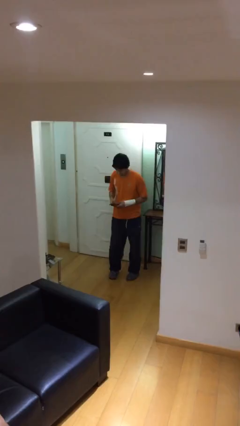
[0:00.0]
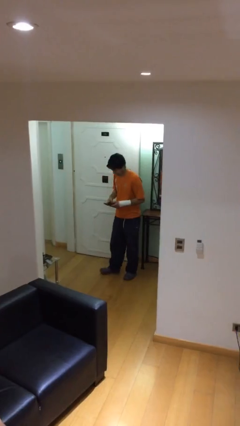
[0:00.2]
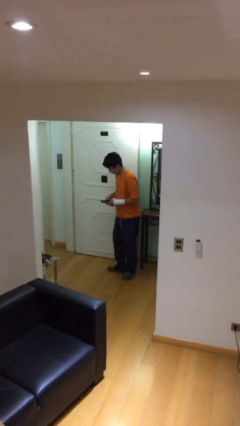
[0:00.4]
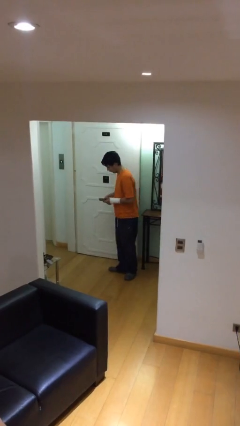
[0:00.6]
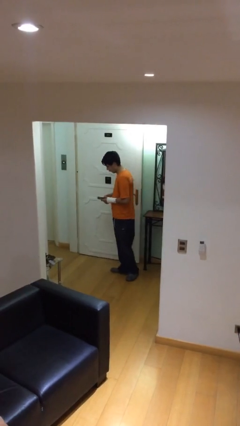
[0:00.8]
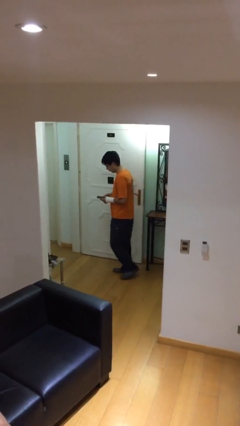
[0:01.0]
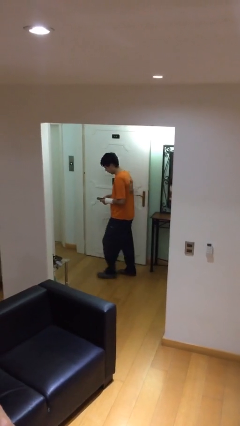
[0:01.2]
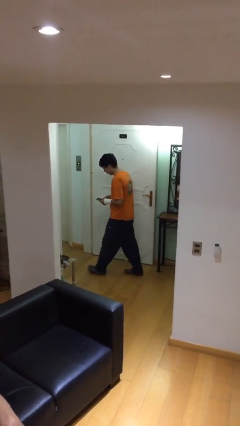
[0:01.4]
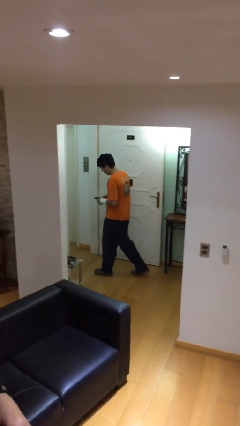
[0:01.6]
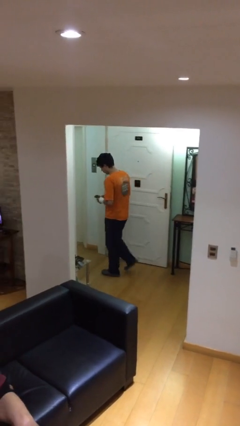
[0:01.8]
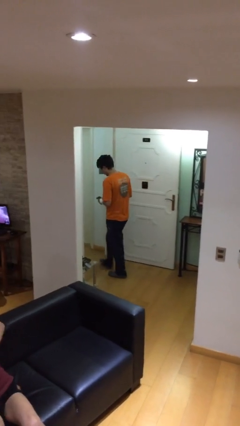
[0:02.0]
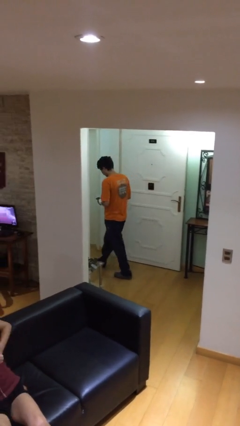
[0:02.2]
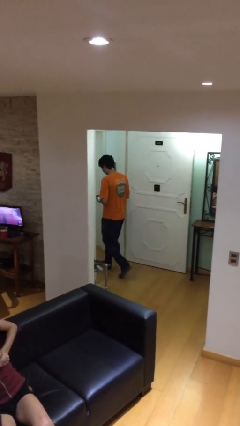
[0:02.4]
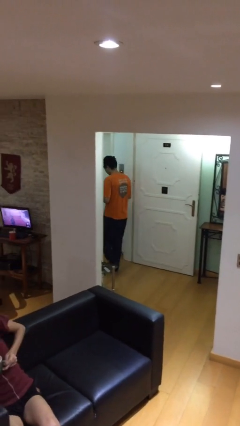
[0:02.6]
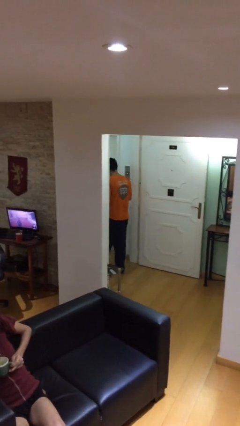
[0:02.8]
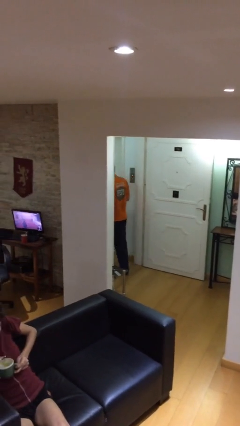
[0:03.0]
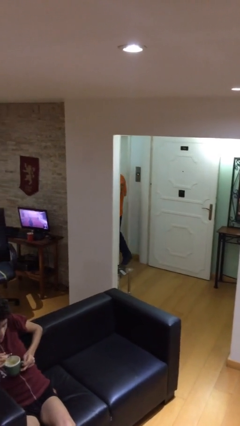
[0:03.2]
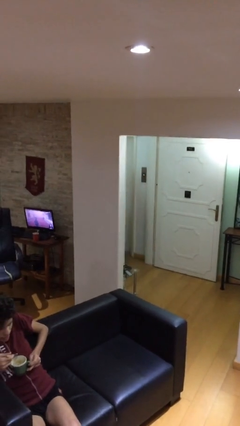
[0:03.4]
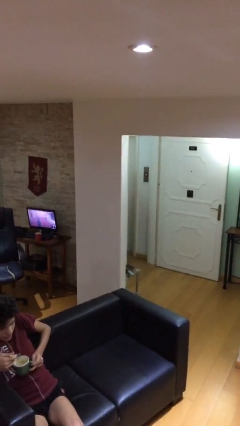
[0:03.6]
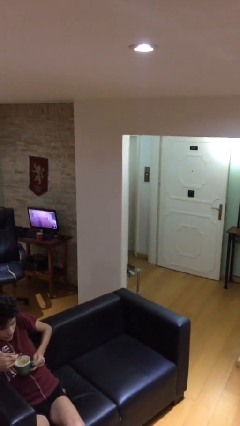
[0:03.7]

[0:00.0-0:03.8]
person exits scene through structure

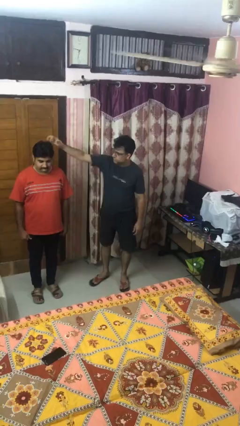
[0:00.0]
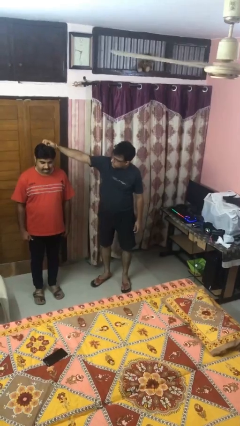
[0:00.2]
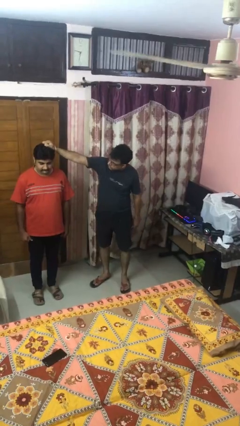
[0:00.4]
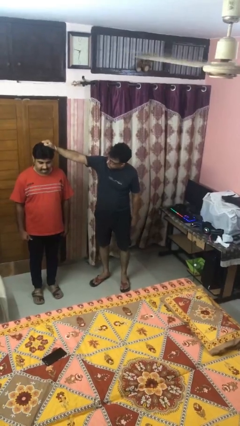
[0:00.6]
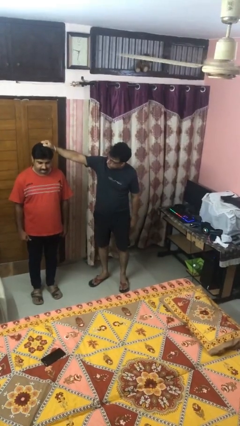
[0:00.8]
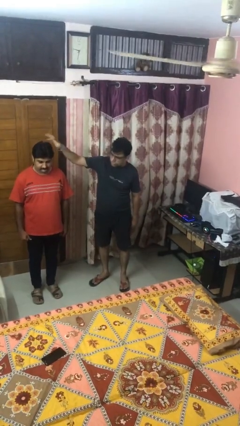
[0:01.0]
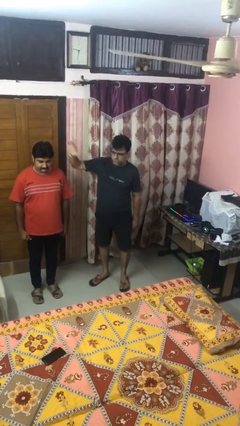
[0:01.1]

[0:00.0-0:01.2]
person grabs person by hair

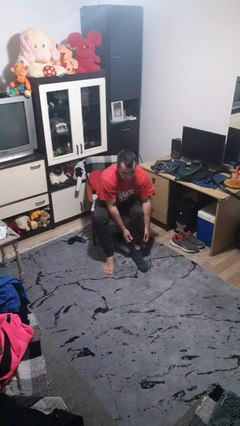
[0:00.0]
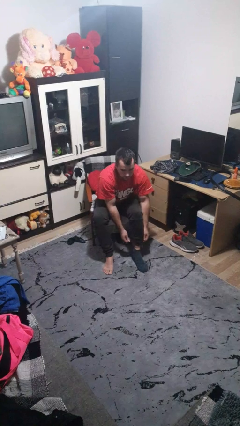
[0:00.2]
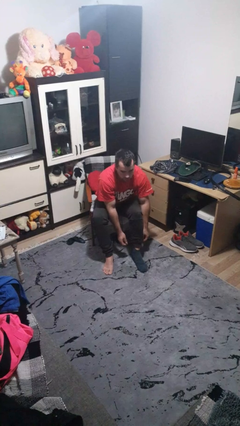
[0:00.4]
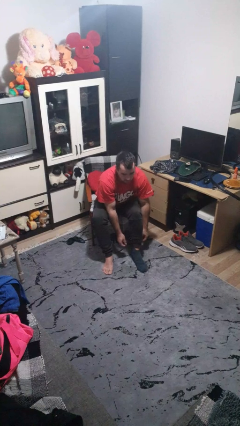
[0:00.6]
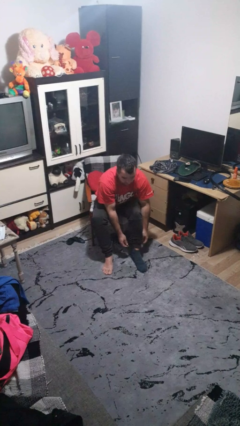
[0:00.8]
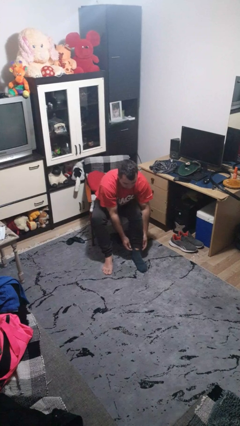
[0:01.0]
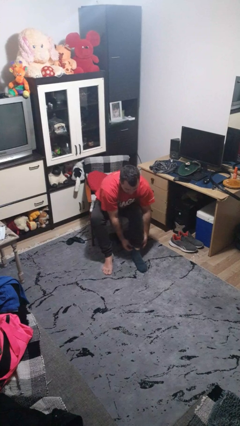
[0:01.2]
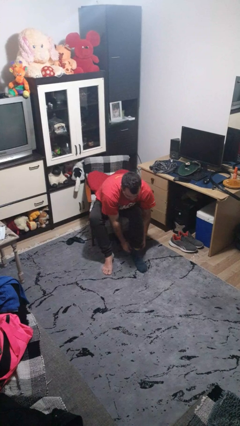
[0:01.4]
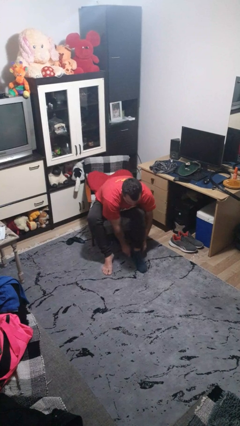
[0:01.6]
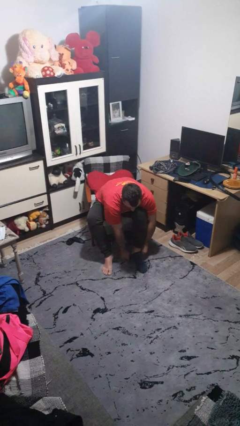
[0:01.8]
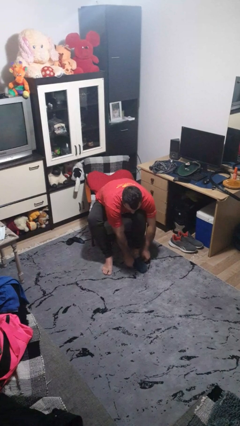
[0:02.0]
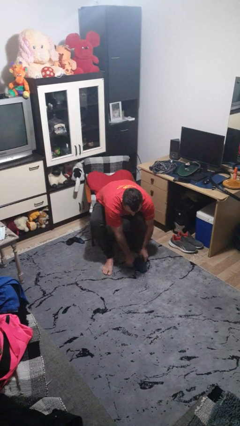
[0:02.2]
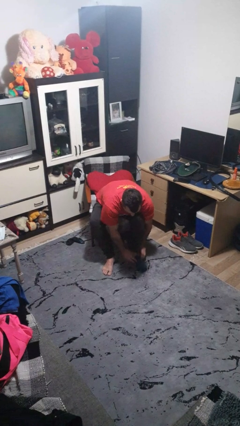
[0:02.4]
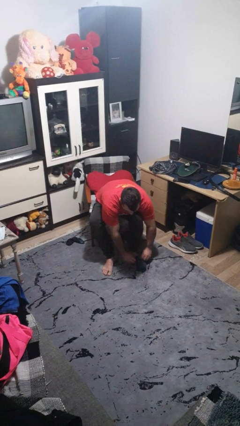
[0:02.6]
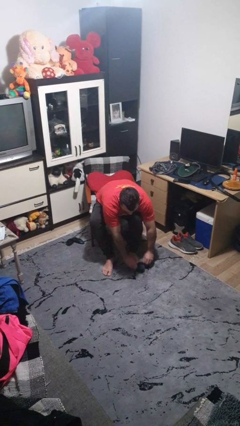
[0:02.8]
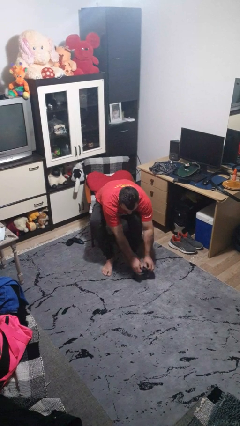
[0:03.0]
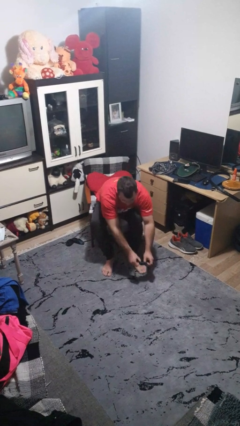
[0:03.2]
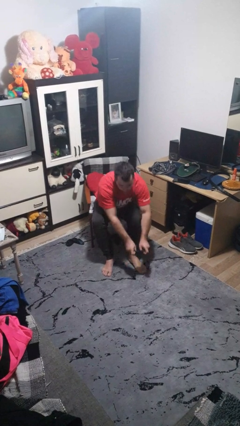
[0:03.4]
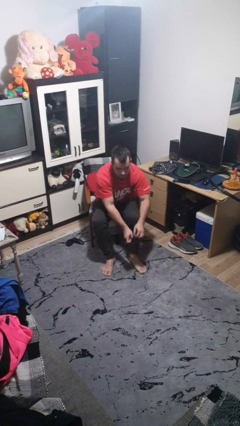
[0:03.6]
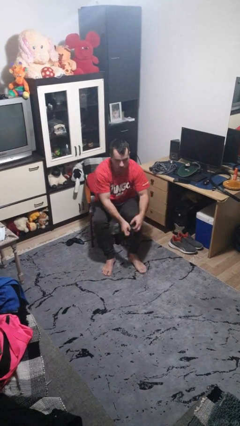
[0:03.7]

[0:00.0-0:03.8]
person takes off socks

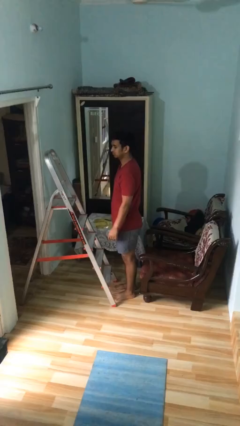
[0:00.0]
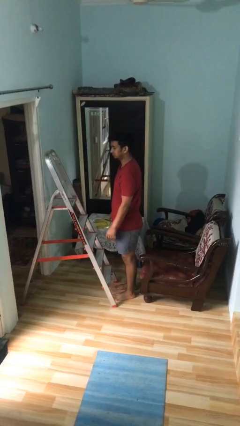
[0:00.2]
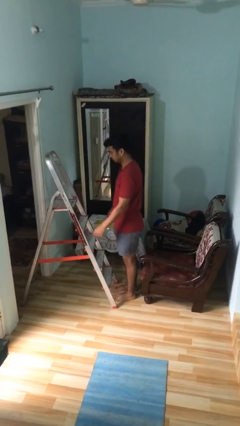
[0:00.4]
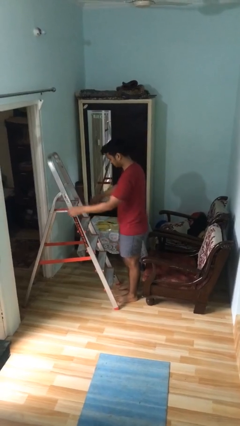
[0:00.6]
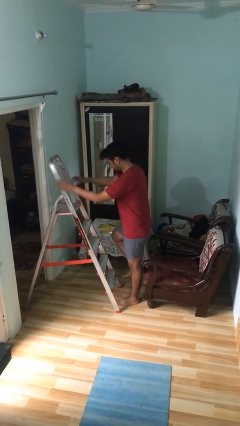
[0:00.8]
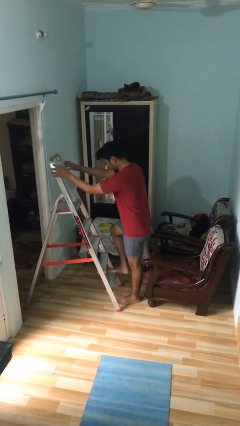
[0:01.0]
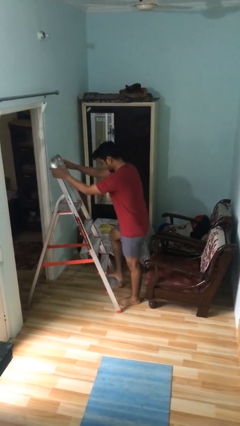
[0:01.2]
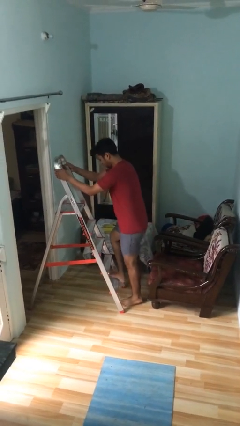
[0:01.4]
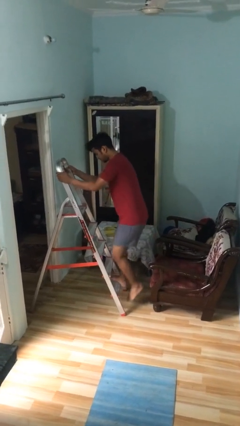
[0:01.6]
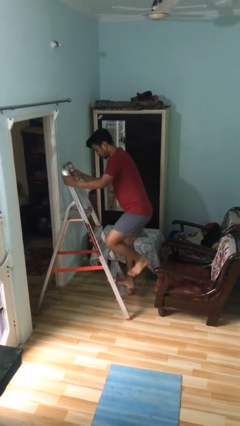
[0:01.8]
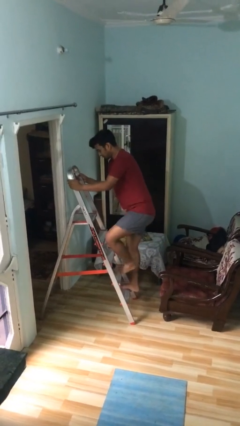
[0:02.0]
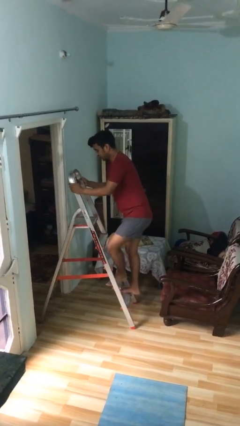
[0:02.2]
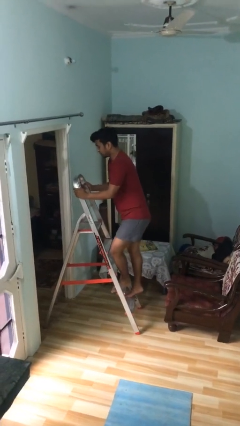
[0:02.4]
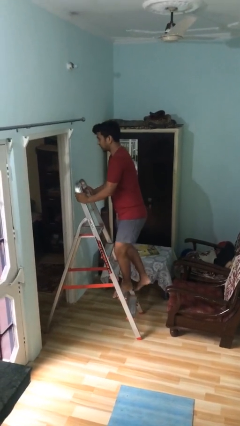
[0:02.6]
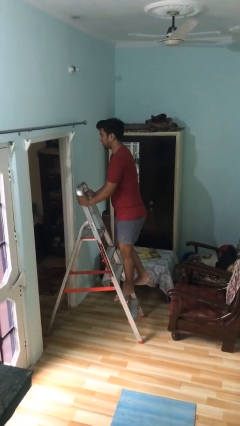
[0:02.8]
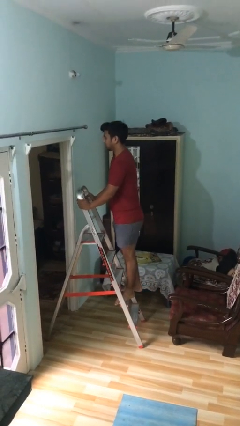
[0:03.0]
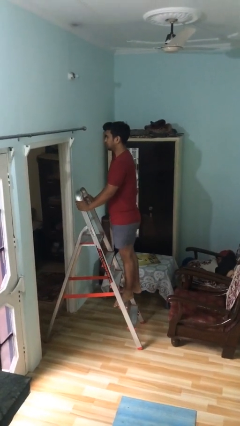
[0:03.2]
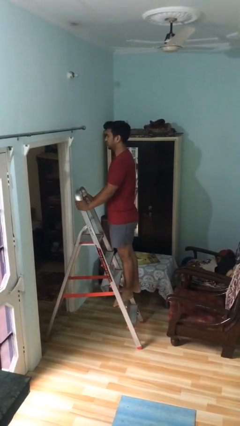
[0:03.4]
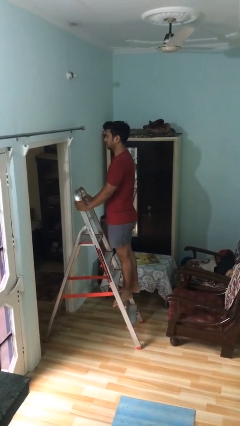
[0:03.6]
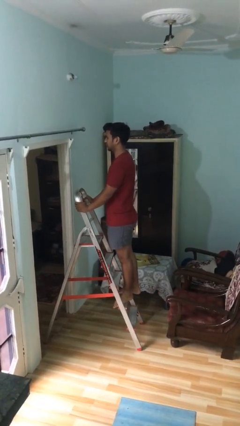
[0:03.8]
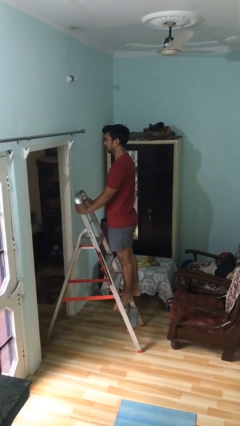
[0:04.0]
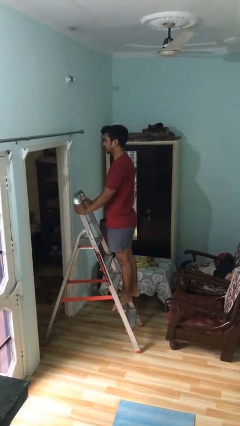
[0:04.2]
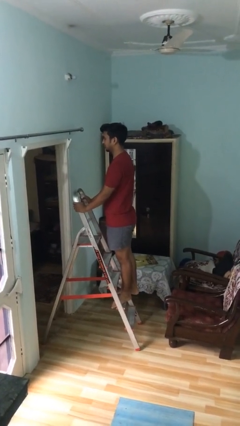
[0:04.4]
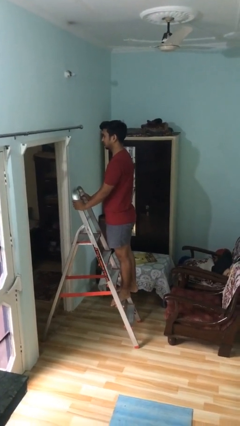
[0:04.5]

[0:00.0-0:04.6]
person climbs up ladder

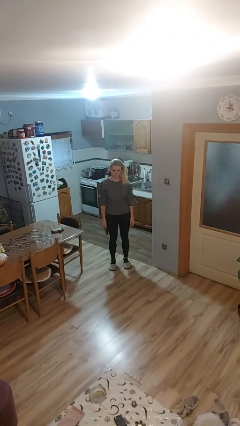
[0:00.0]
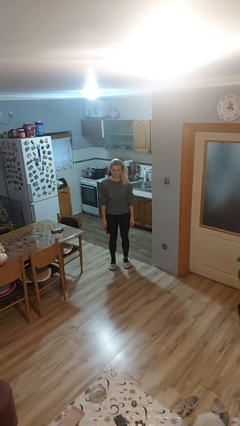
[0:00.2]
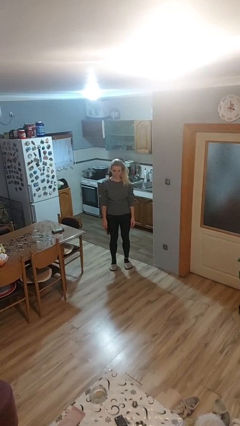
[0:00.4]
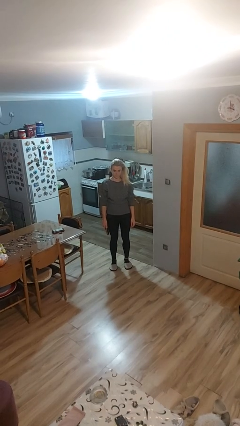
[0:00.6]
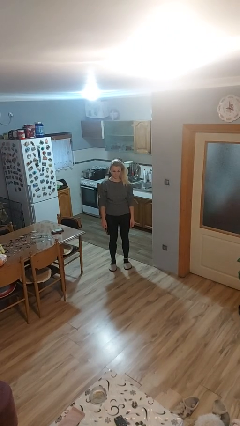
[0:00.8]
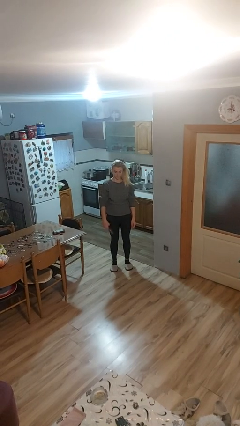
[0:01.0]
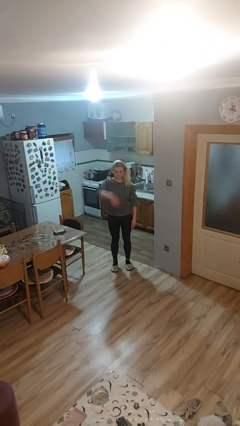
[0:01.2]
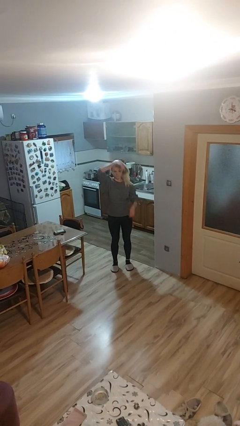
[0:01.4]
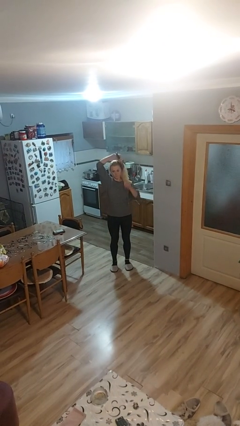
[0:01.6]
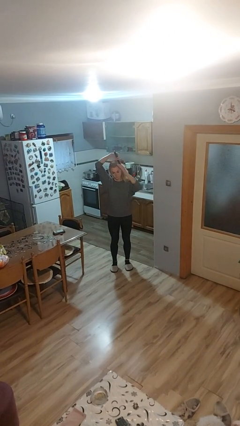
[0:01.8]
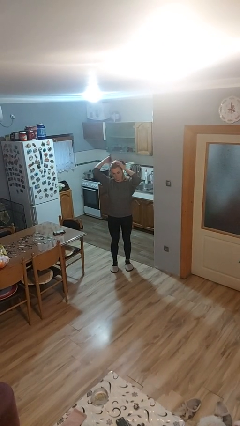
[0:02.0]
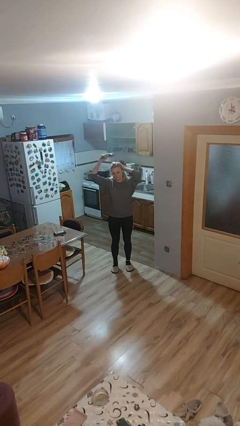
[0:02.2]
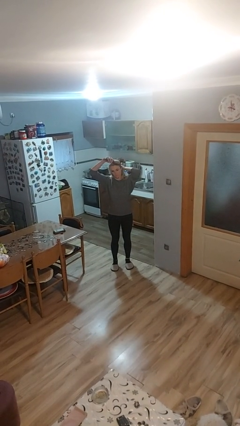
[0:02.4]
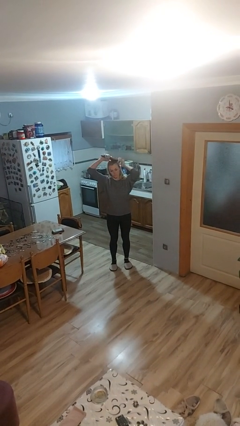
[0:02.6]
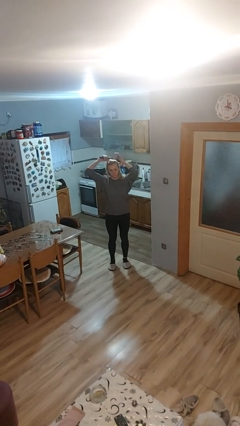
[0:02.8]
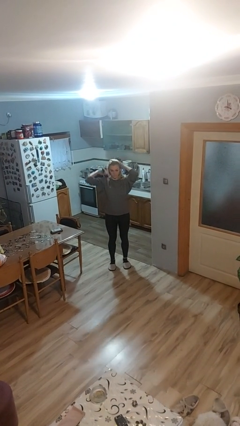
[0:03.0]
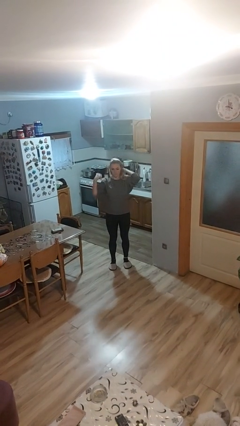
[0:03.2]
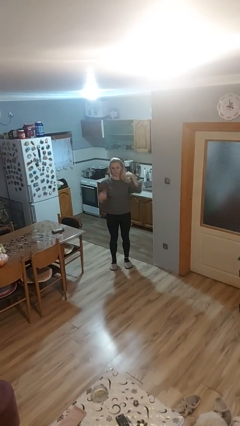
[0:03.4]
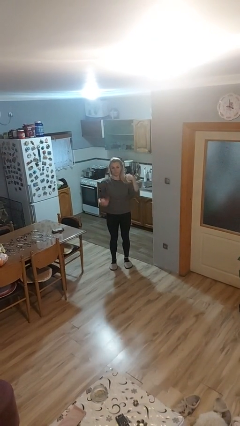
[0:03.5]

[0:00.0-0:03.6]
person brushes hair

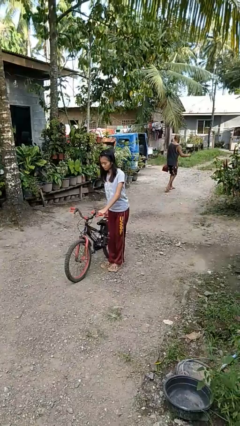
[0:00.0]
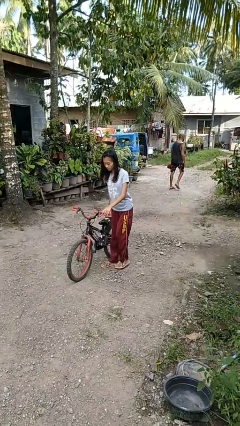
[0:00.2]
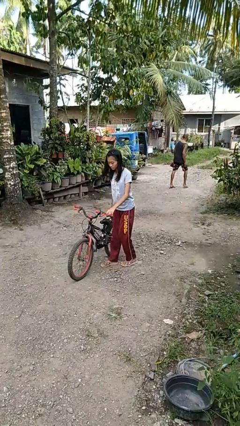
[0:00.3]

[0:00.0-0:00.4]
person carries bicycle
